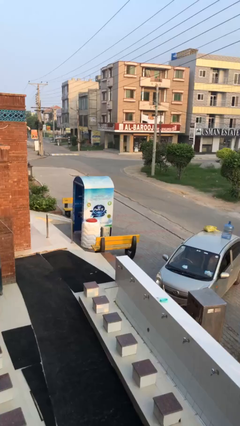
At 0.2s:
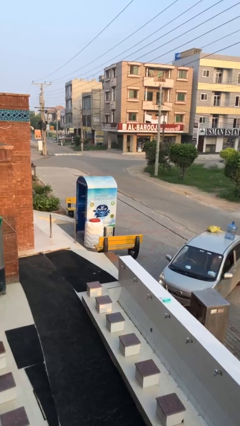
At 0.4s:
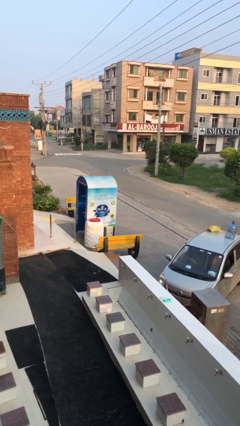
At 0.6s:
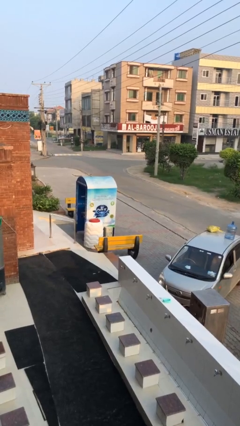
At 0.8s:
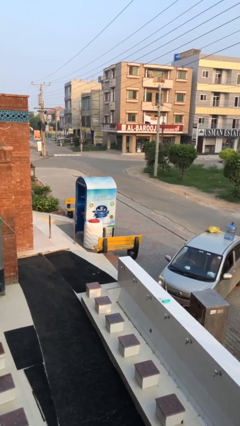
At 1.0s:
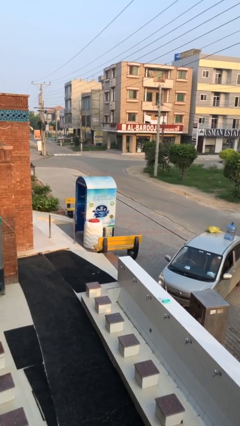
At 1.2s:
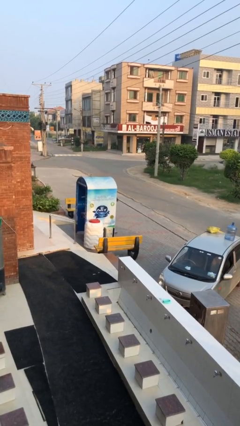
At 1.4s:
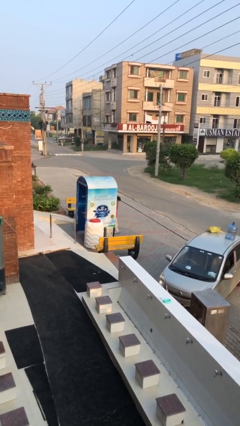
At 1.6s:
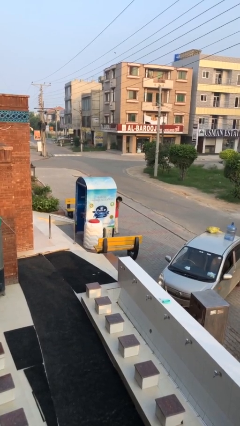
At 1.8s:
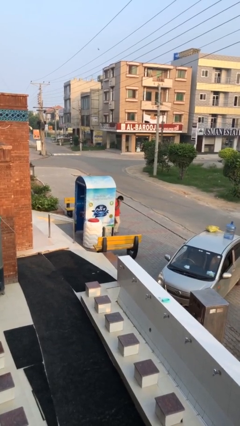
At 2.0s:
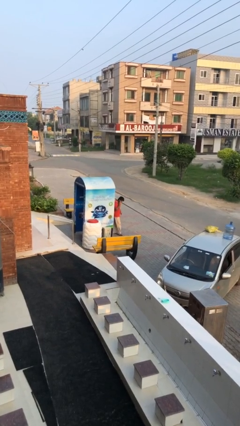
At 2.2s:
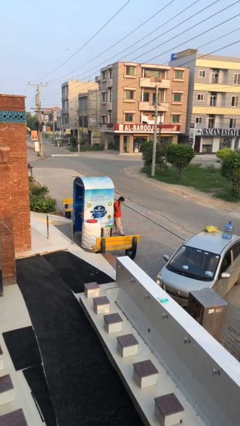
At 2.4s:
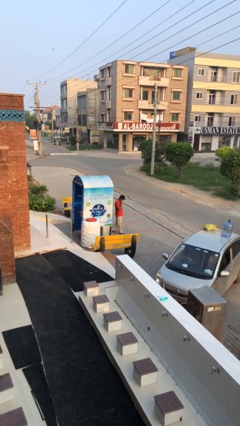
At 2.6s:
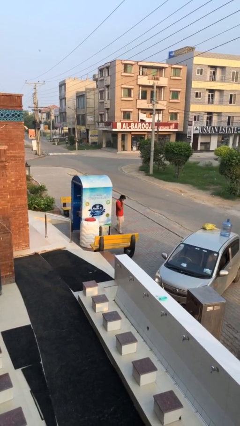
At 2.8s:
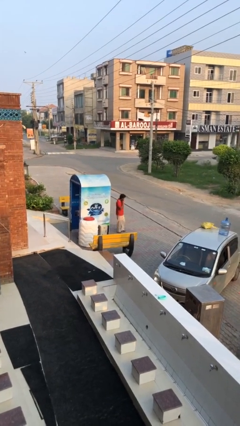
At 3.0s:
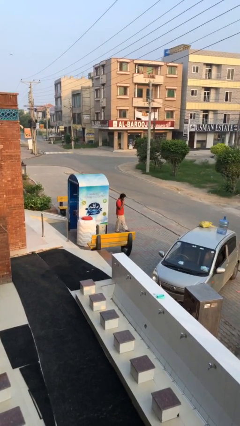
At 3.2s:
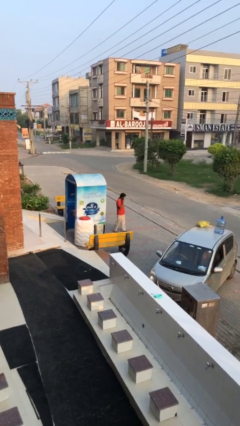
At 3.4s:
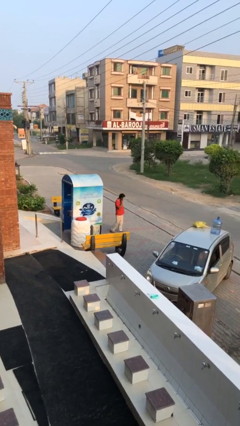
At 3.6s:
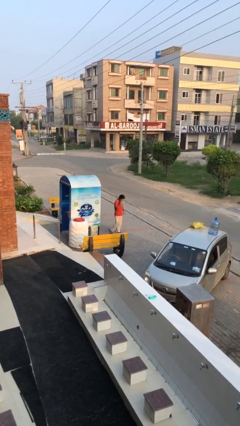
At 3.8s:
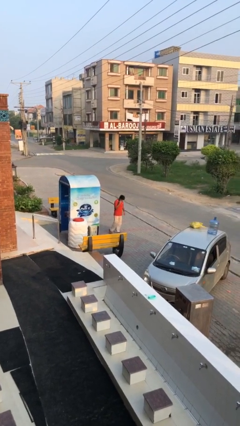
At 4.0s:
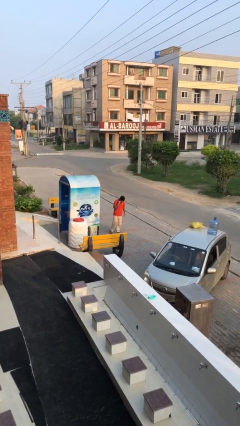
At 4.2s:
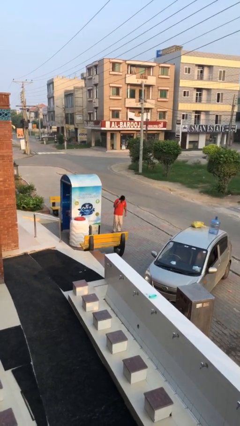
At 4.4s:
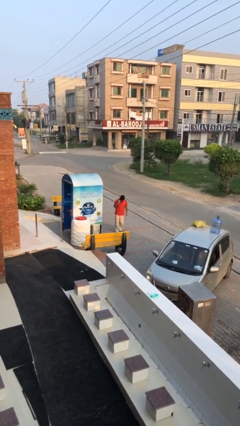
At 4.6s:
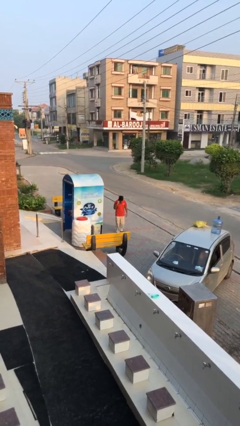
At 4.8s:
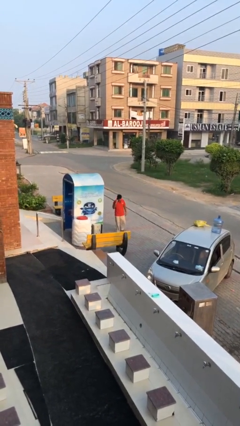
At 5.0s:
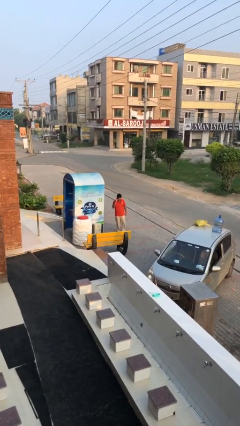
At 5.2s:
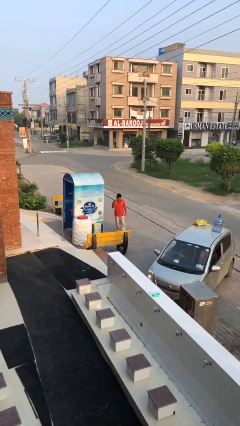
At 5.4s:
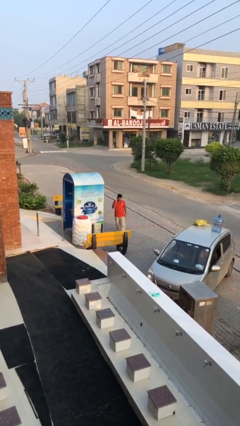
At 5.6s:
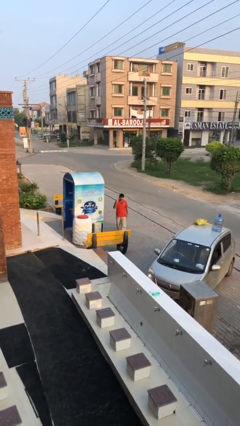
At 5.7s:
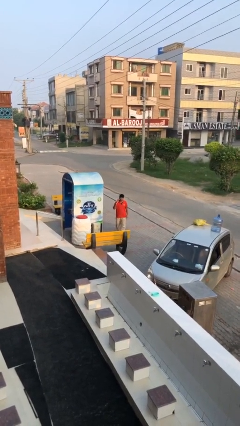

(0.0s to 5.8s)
person enters scene through structure

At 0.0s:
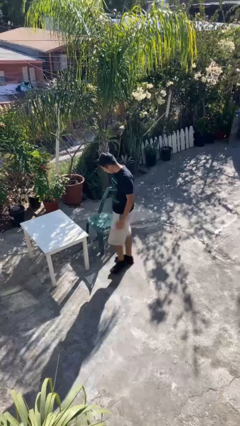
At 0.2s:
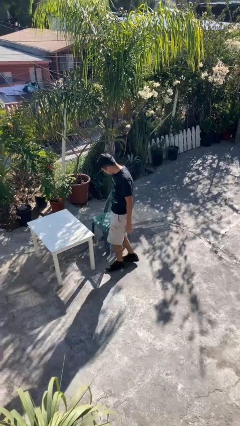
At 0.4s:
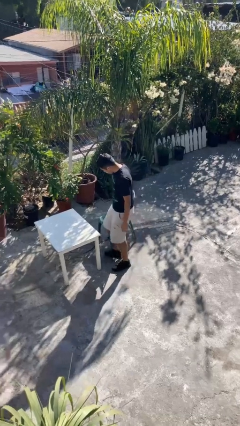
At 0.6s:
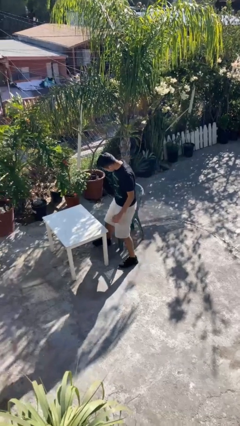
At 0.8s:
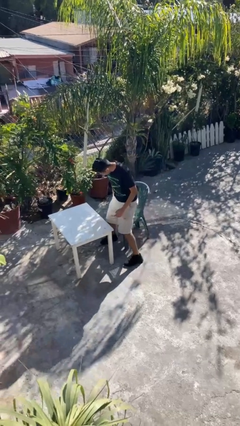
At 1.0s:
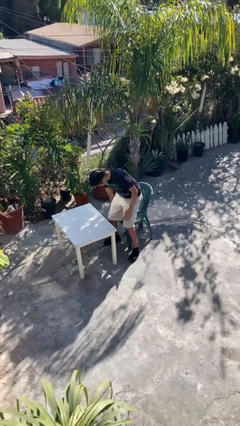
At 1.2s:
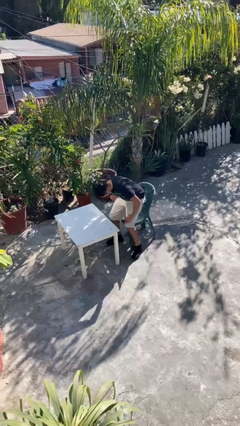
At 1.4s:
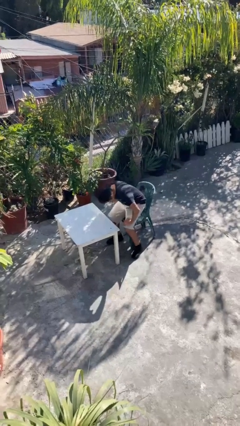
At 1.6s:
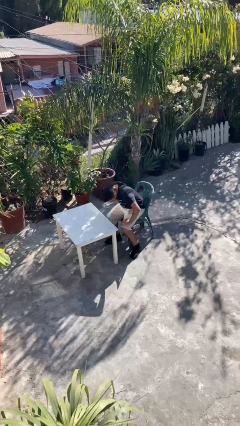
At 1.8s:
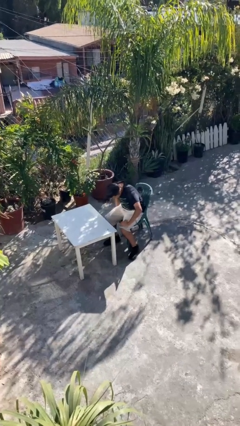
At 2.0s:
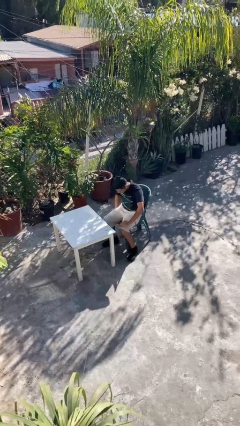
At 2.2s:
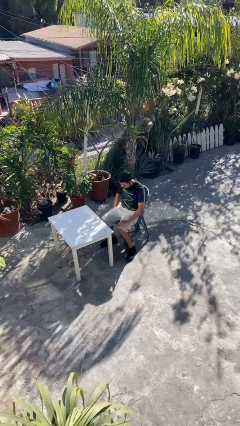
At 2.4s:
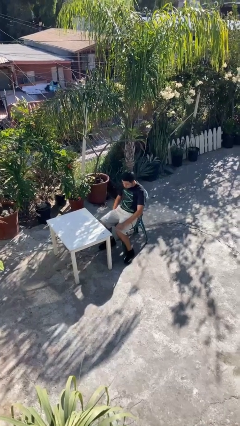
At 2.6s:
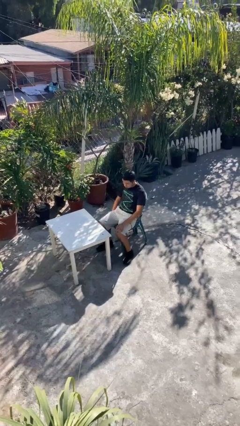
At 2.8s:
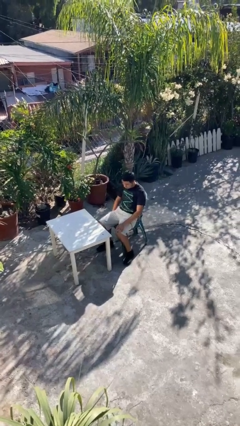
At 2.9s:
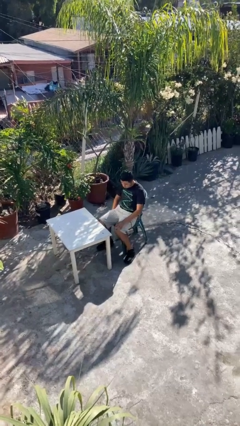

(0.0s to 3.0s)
person sits down

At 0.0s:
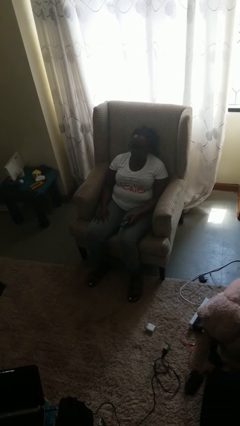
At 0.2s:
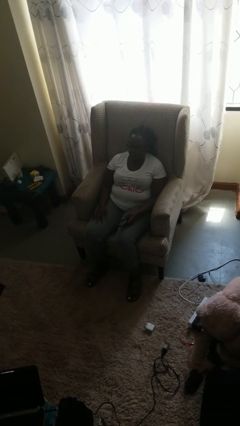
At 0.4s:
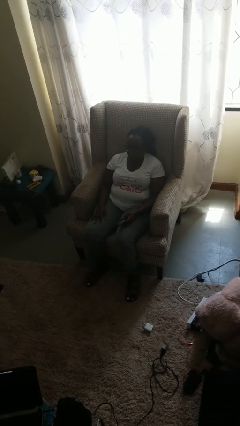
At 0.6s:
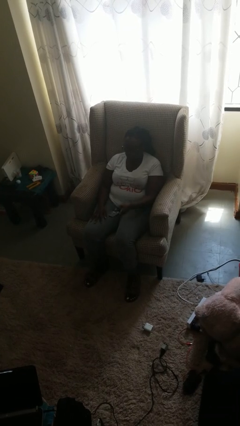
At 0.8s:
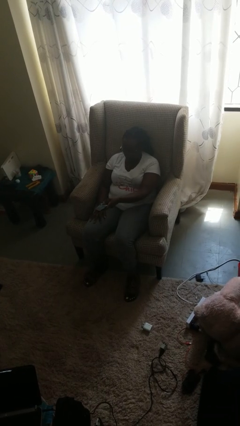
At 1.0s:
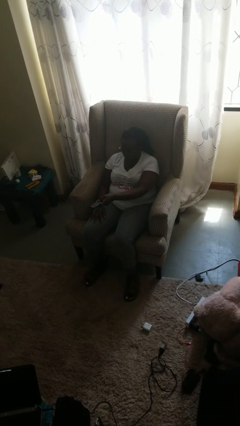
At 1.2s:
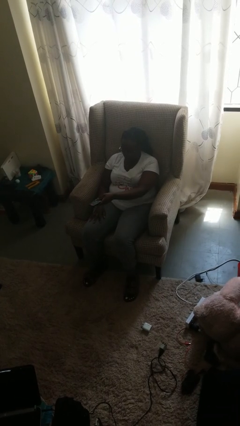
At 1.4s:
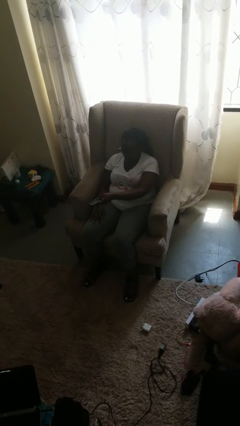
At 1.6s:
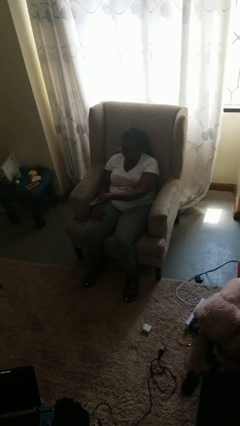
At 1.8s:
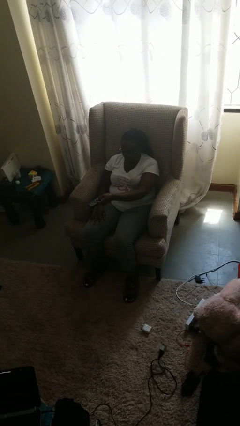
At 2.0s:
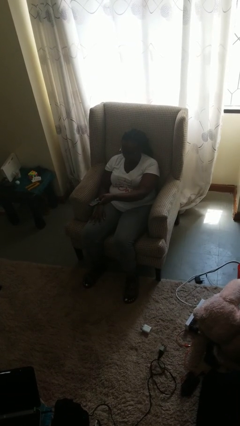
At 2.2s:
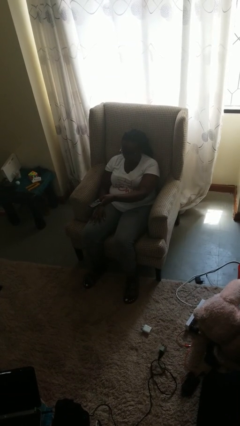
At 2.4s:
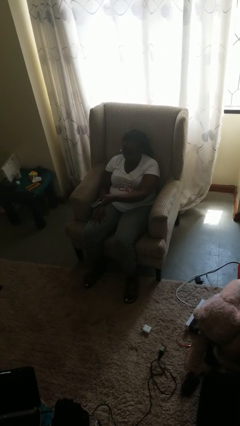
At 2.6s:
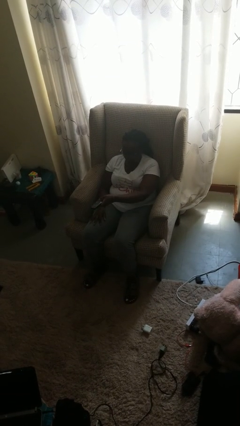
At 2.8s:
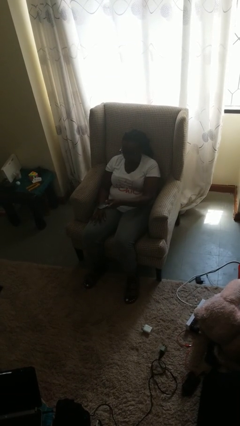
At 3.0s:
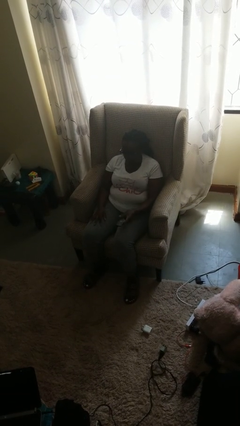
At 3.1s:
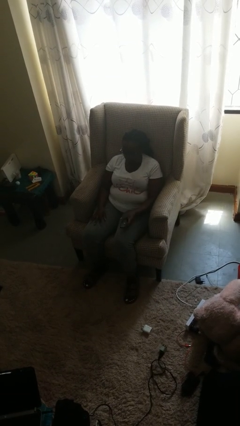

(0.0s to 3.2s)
person uses television remote

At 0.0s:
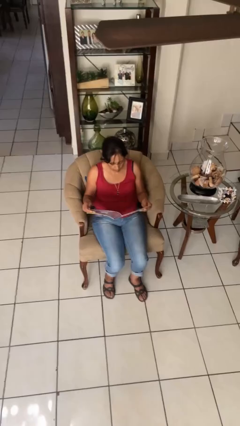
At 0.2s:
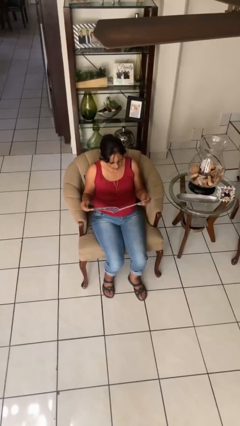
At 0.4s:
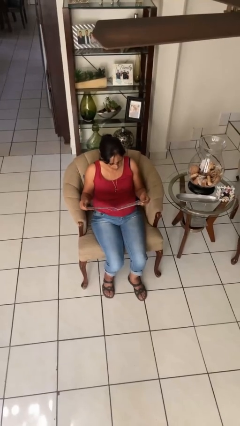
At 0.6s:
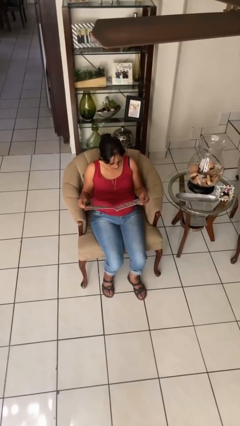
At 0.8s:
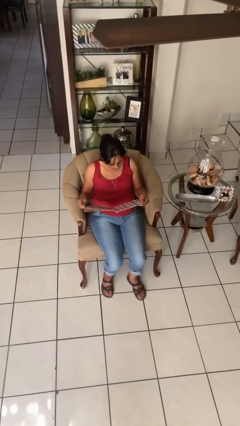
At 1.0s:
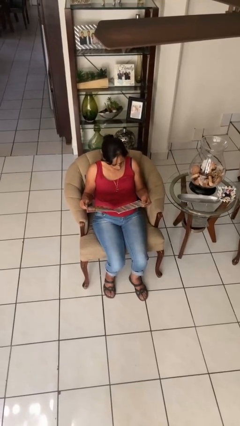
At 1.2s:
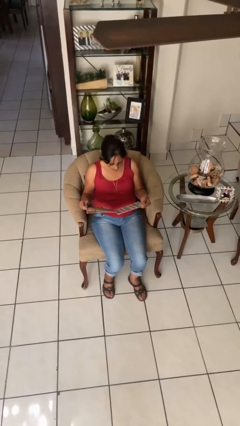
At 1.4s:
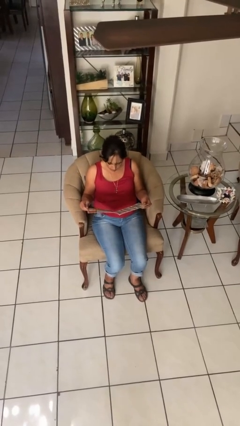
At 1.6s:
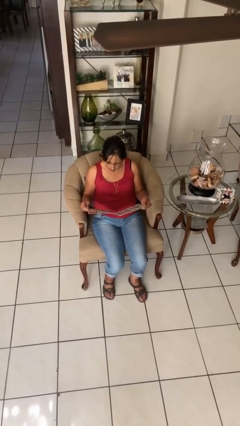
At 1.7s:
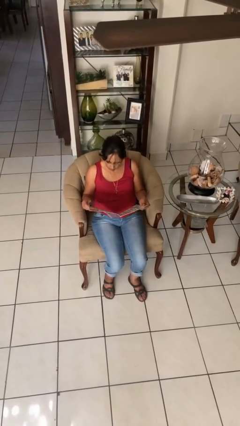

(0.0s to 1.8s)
person reads magazine

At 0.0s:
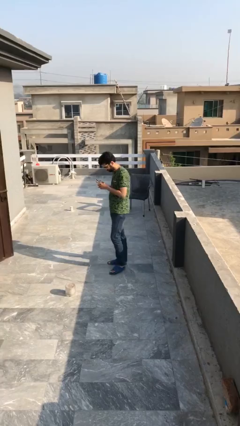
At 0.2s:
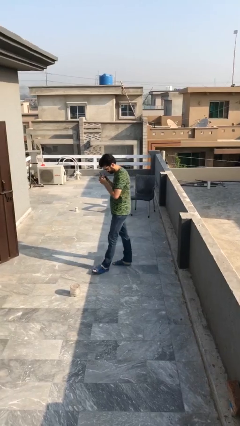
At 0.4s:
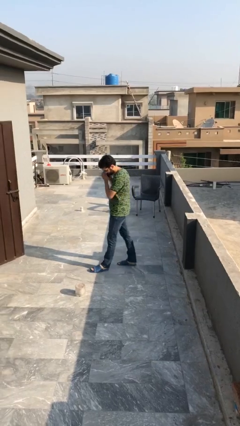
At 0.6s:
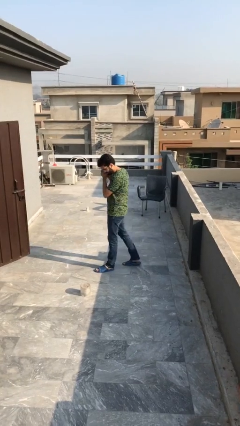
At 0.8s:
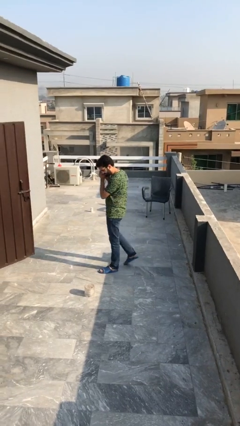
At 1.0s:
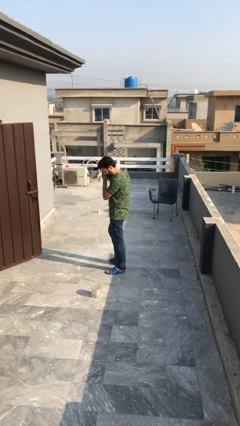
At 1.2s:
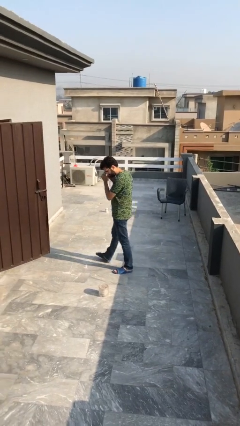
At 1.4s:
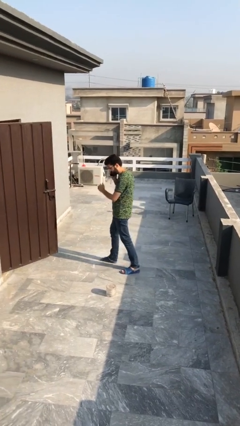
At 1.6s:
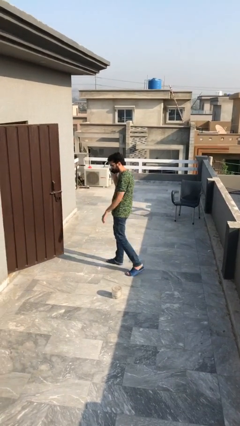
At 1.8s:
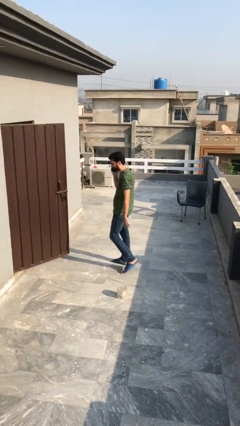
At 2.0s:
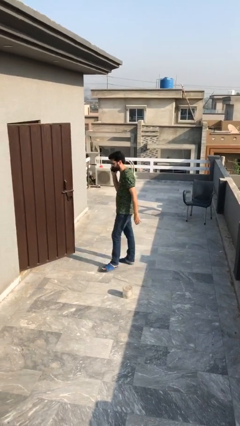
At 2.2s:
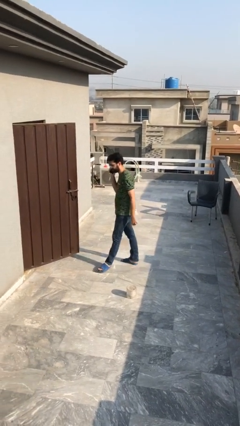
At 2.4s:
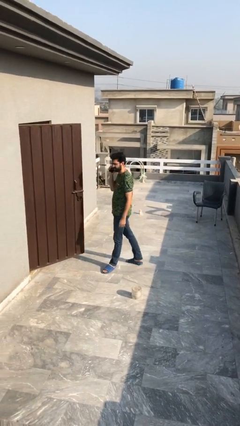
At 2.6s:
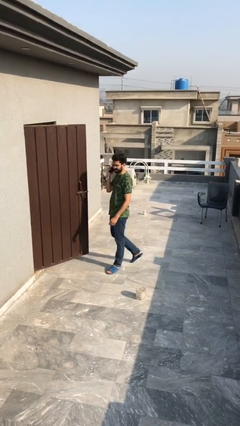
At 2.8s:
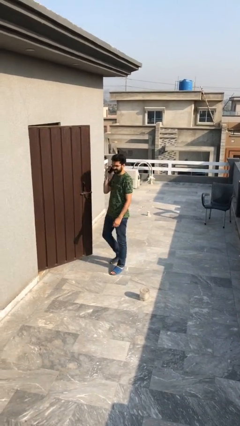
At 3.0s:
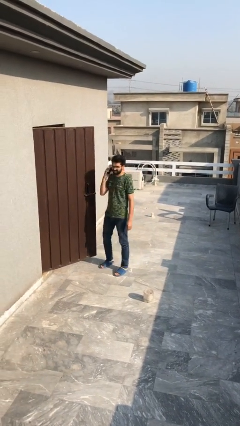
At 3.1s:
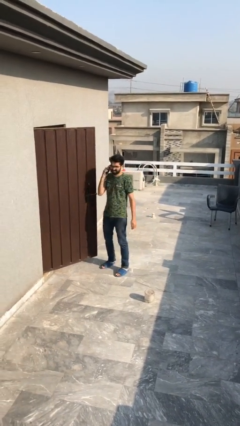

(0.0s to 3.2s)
person talks on phone

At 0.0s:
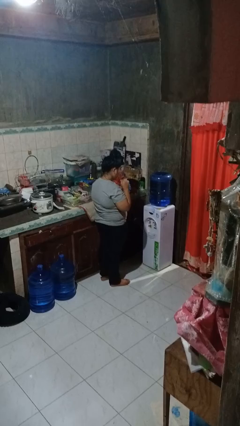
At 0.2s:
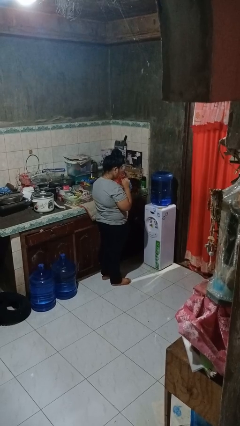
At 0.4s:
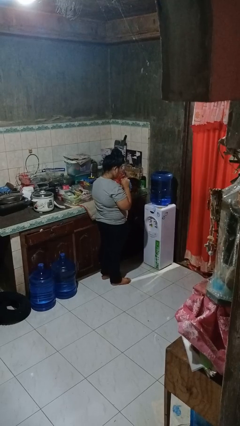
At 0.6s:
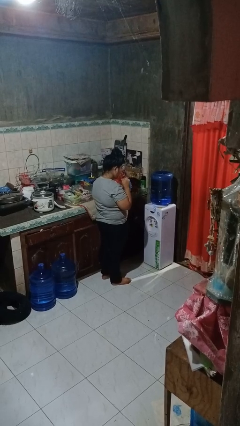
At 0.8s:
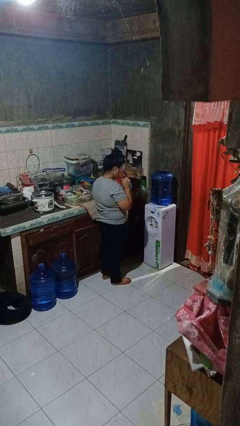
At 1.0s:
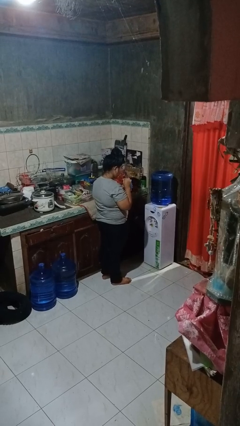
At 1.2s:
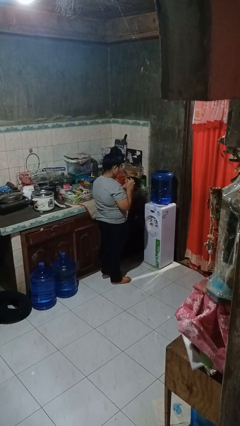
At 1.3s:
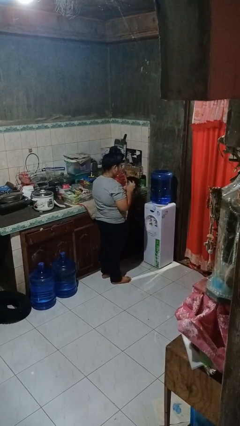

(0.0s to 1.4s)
person drinks from straw
